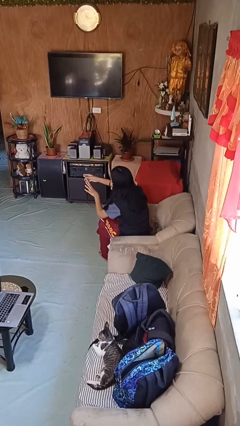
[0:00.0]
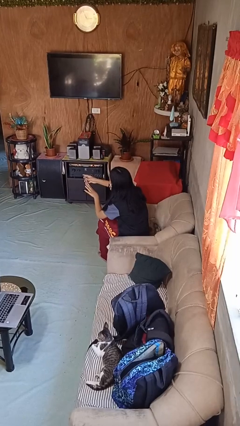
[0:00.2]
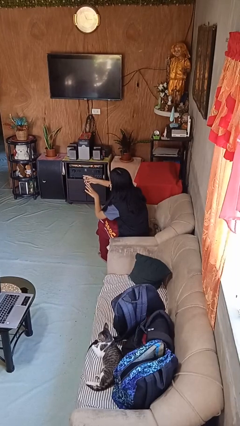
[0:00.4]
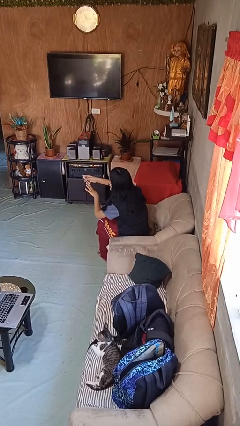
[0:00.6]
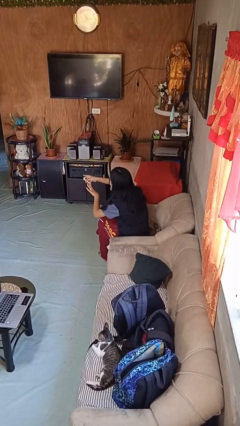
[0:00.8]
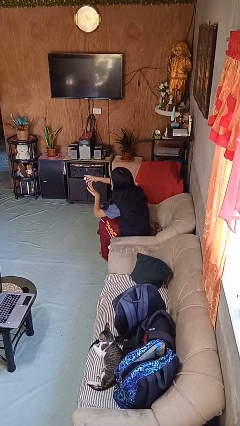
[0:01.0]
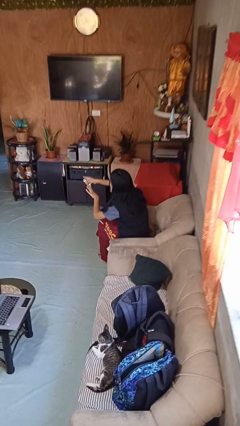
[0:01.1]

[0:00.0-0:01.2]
person clips fingernails

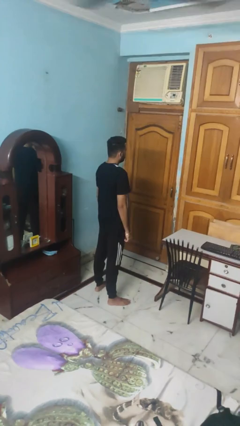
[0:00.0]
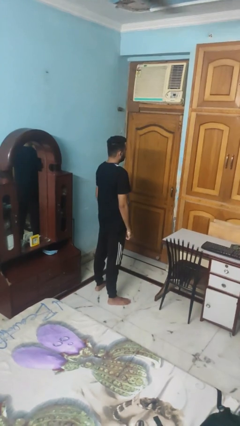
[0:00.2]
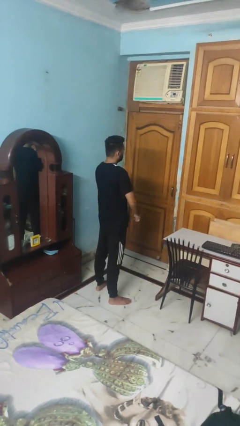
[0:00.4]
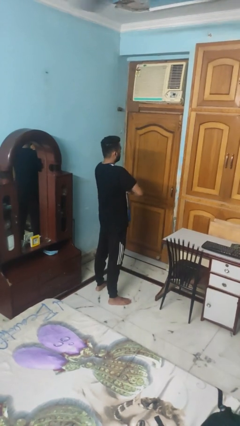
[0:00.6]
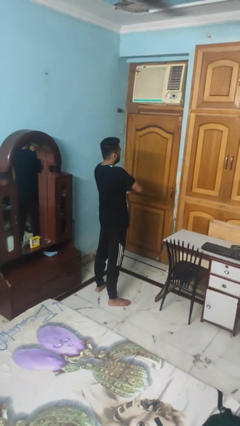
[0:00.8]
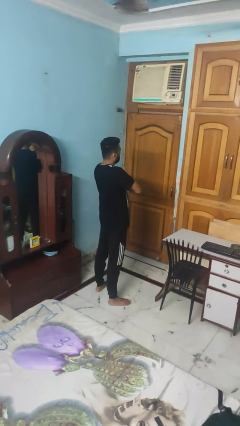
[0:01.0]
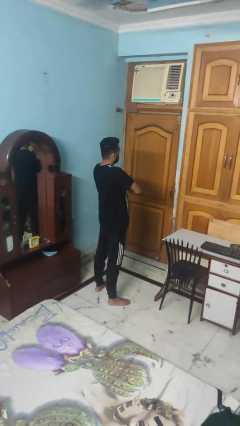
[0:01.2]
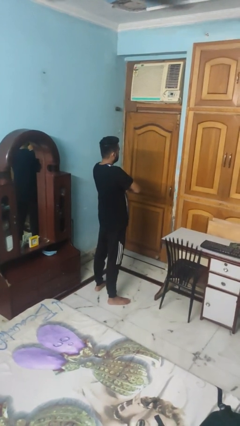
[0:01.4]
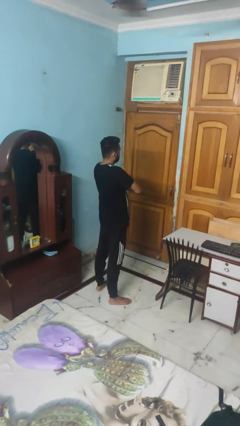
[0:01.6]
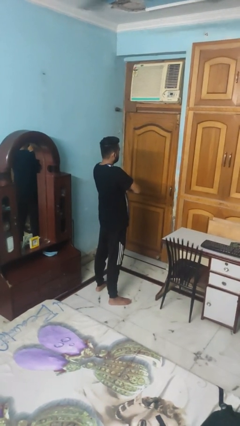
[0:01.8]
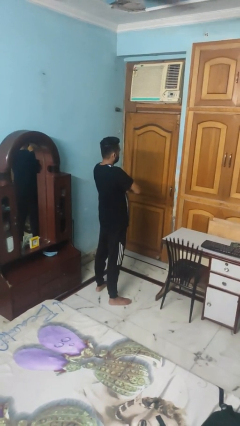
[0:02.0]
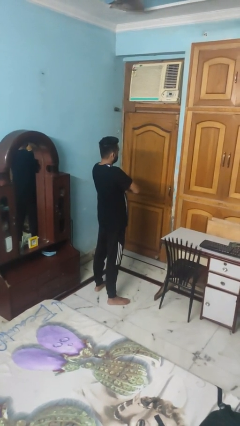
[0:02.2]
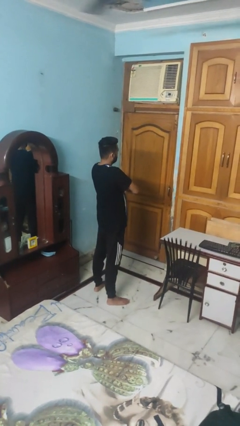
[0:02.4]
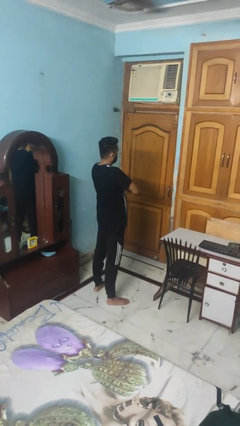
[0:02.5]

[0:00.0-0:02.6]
person crosses arms

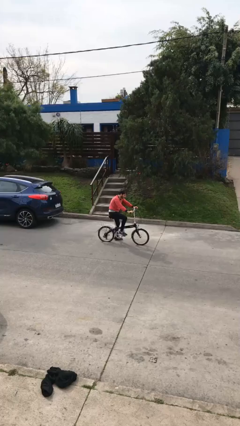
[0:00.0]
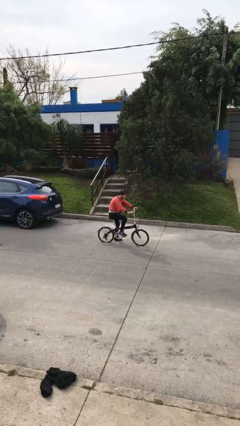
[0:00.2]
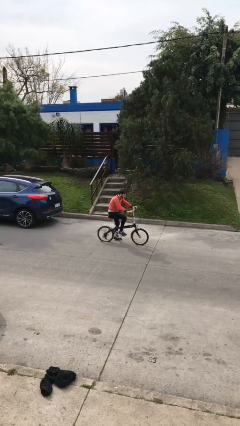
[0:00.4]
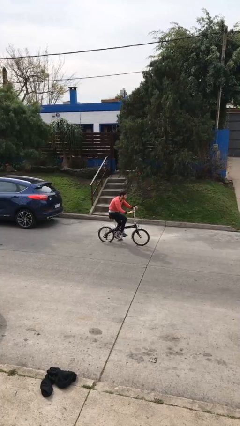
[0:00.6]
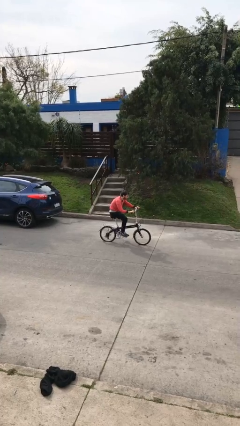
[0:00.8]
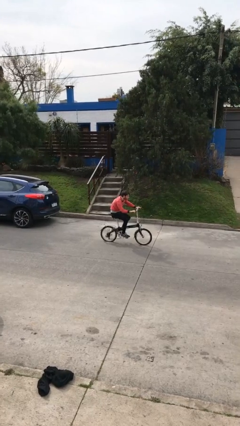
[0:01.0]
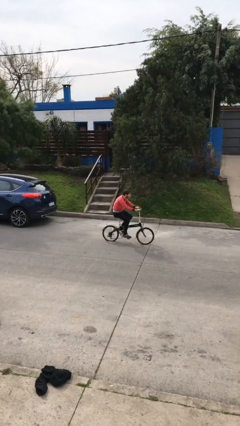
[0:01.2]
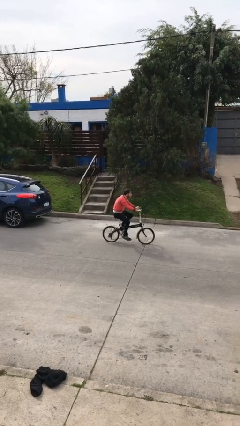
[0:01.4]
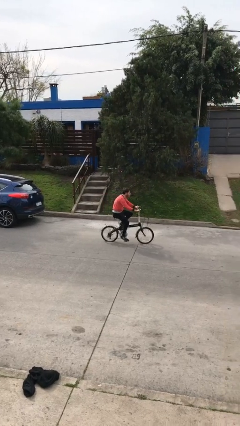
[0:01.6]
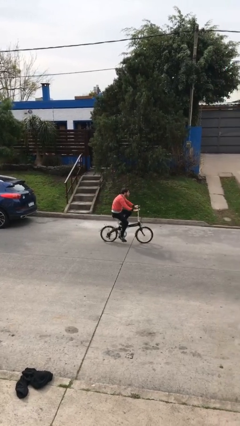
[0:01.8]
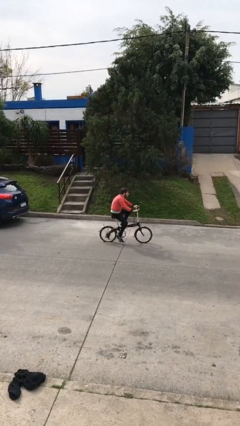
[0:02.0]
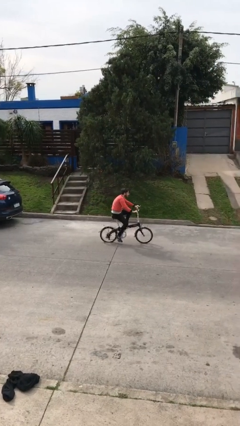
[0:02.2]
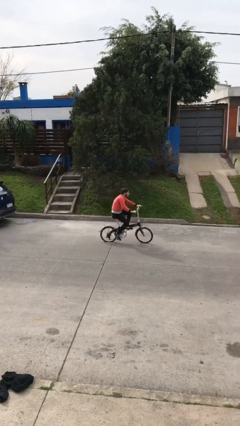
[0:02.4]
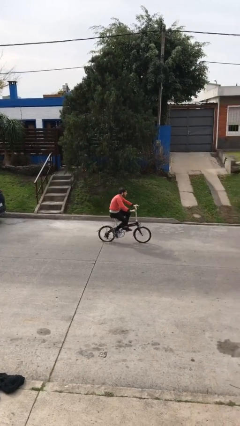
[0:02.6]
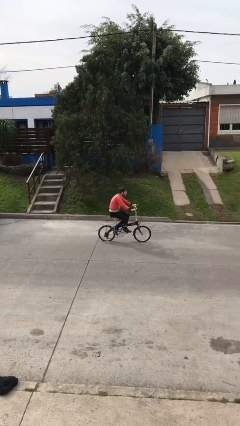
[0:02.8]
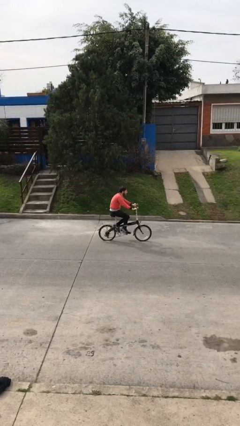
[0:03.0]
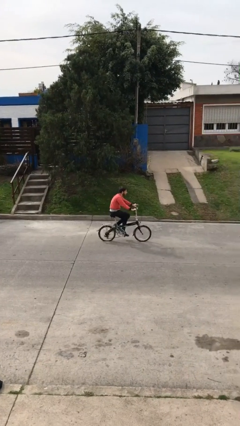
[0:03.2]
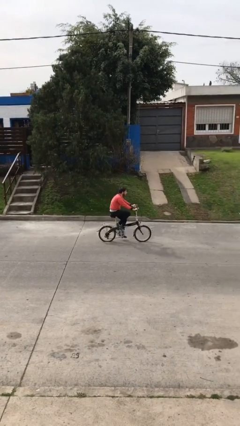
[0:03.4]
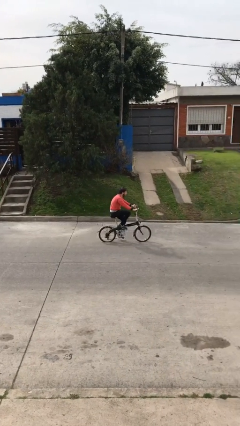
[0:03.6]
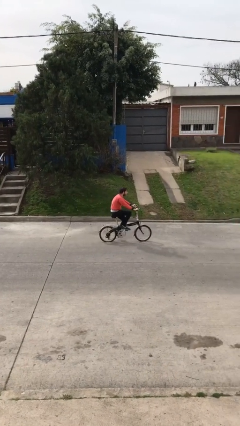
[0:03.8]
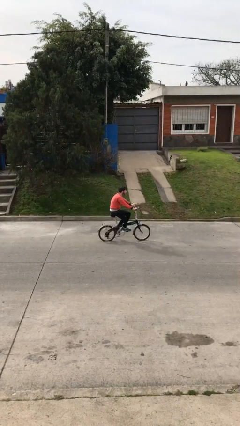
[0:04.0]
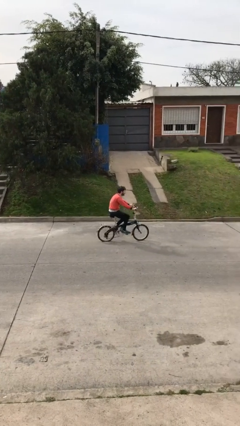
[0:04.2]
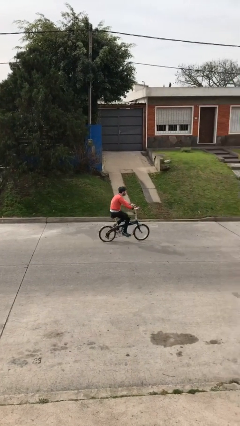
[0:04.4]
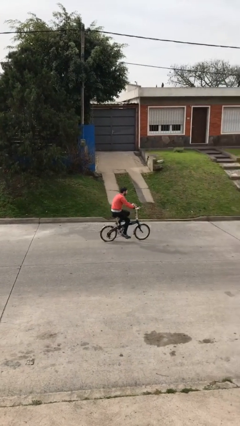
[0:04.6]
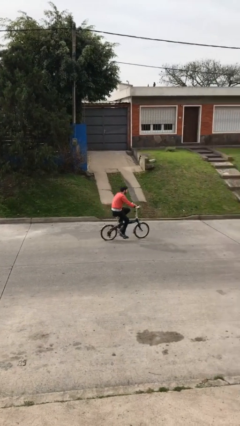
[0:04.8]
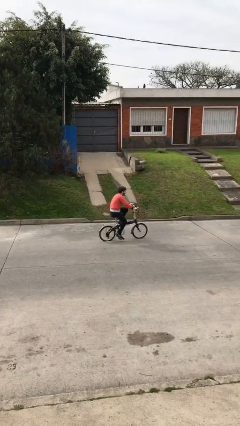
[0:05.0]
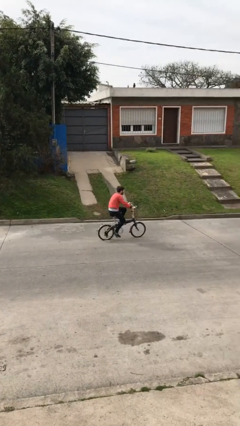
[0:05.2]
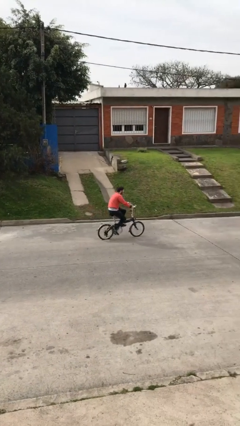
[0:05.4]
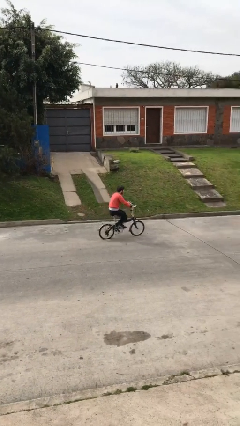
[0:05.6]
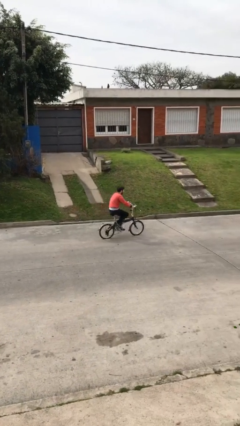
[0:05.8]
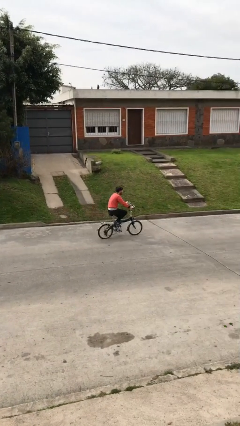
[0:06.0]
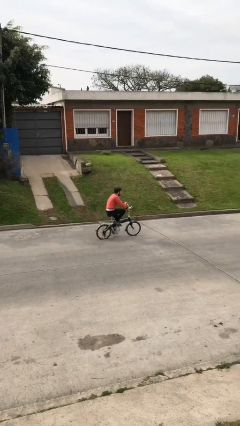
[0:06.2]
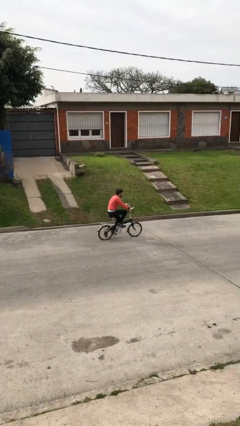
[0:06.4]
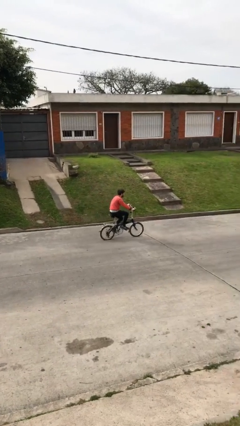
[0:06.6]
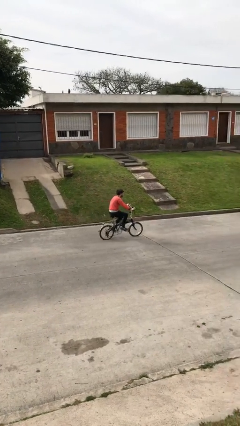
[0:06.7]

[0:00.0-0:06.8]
person rides bicycle

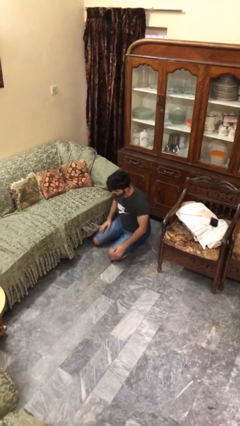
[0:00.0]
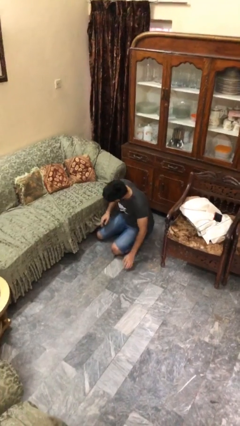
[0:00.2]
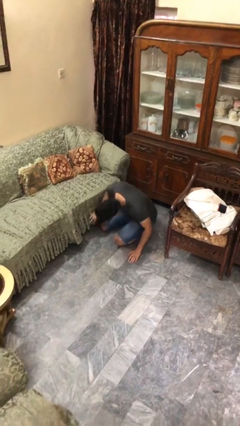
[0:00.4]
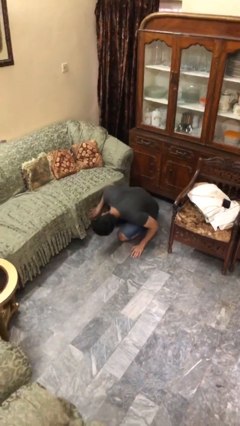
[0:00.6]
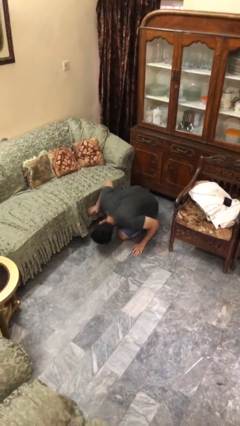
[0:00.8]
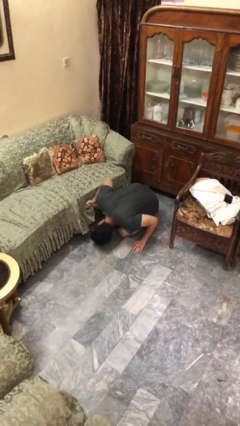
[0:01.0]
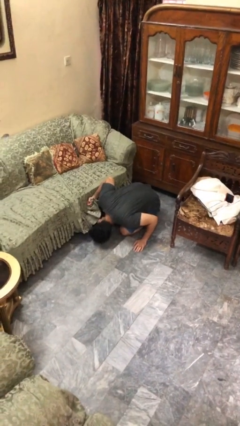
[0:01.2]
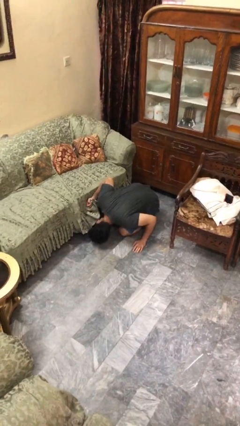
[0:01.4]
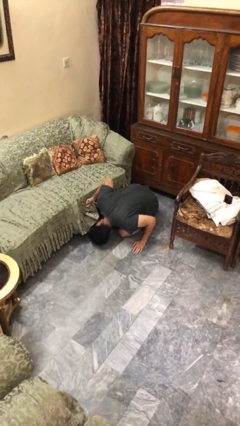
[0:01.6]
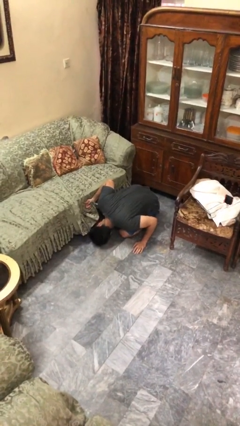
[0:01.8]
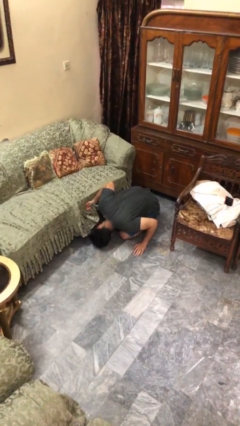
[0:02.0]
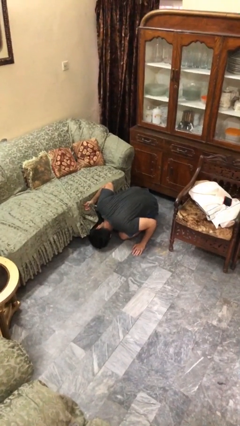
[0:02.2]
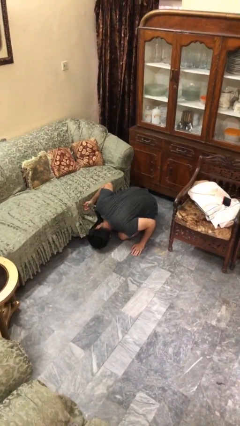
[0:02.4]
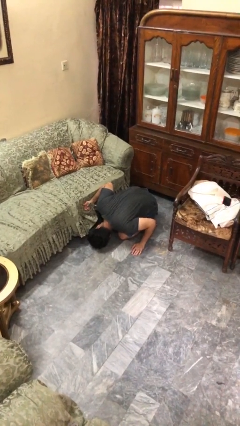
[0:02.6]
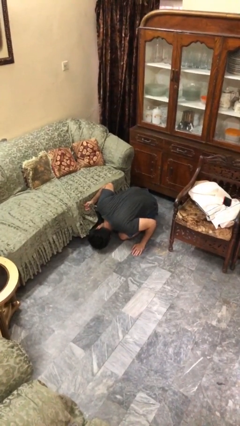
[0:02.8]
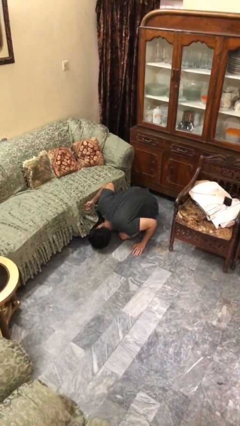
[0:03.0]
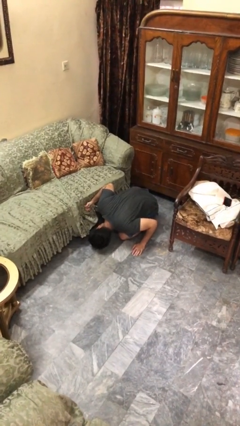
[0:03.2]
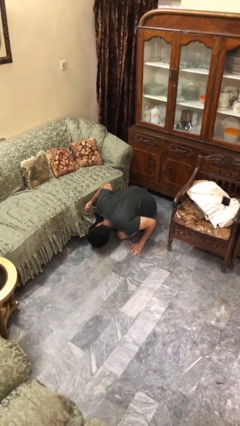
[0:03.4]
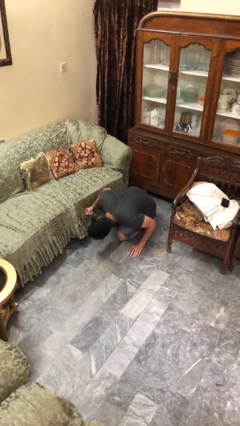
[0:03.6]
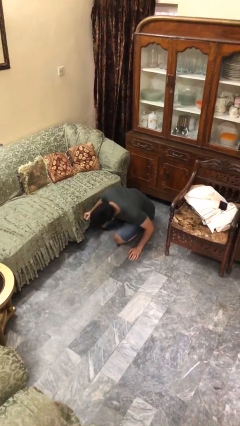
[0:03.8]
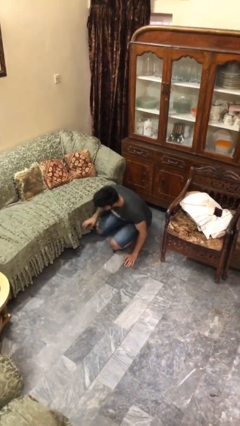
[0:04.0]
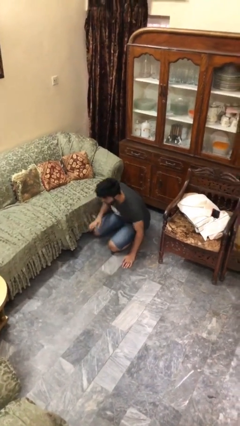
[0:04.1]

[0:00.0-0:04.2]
person searches under couch

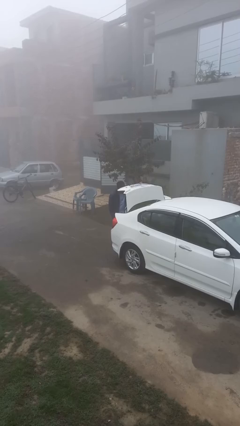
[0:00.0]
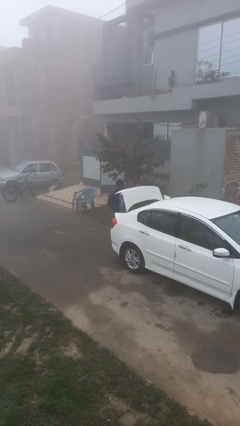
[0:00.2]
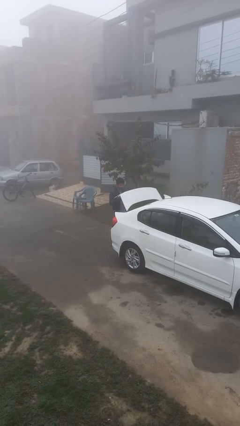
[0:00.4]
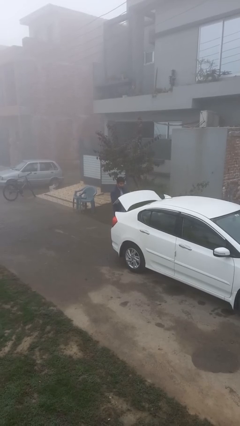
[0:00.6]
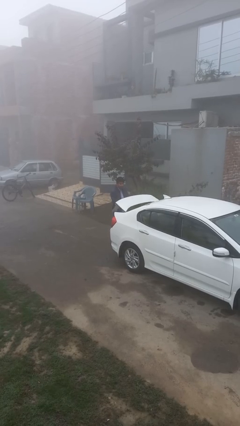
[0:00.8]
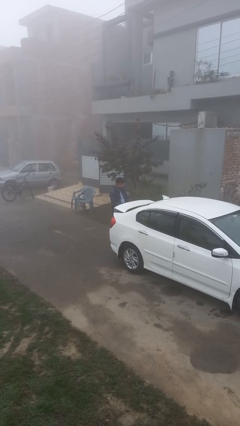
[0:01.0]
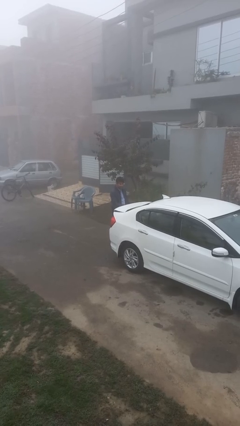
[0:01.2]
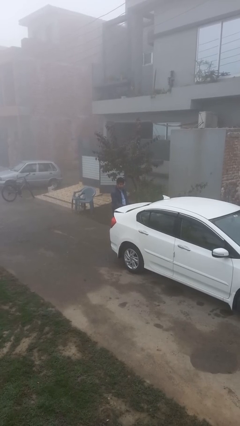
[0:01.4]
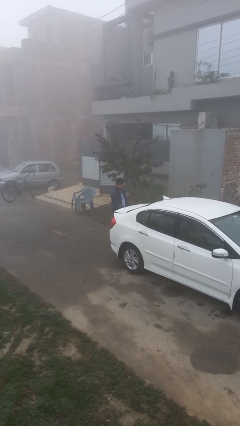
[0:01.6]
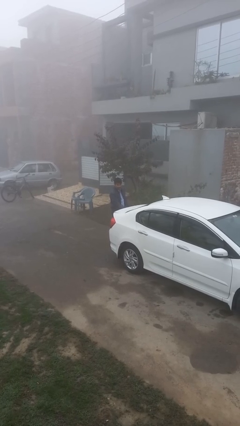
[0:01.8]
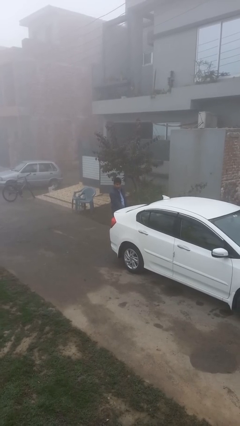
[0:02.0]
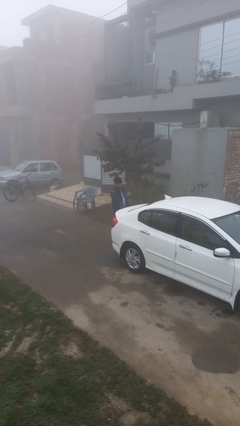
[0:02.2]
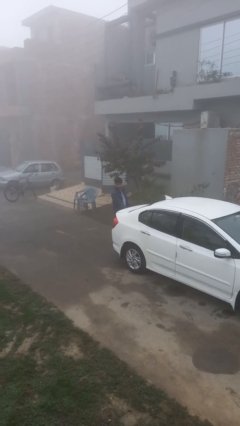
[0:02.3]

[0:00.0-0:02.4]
person closes car trunk

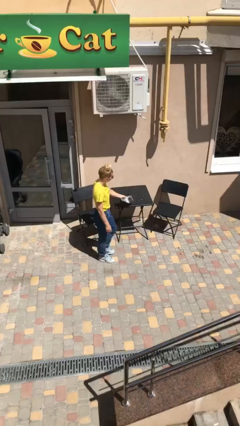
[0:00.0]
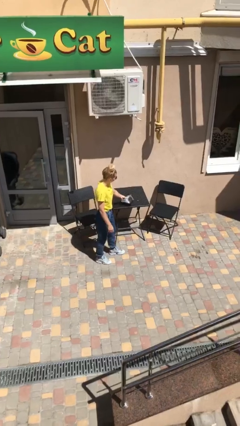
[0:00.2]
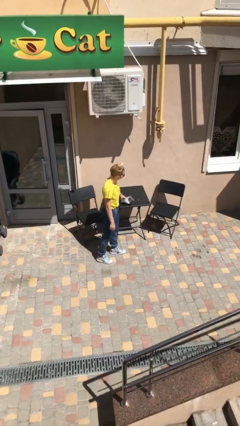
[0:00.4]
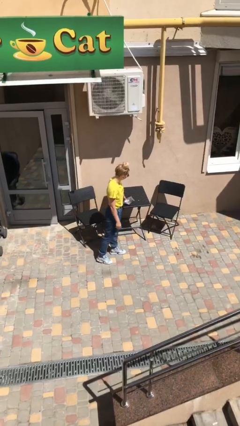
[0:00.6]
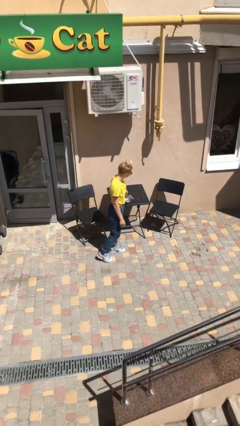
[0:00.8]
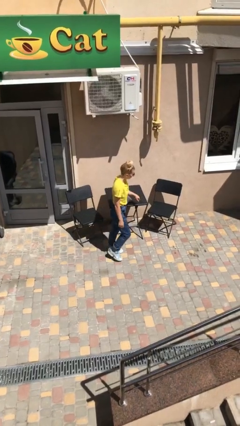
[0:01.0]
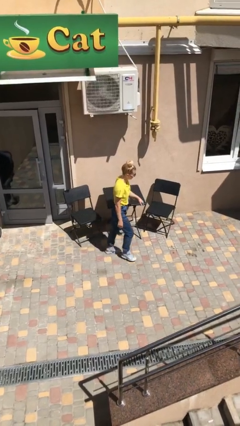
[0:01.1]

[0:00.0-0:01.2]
person puts down object on table
